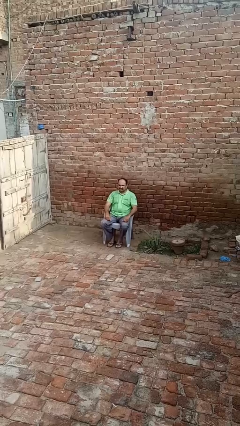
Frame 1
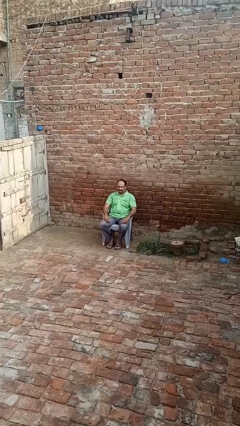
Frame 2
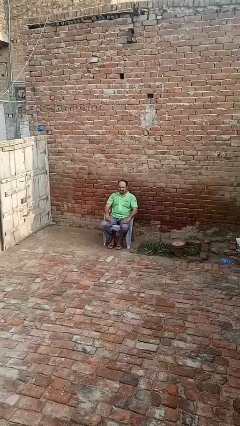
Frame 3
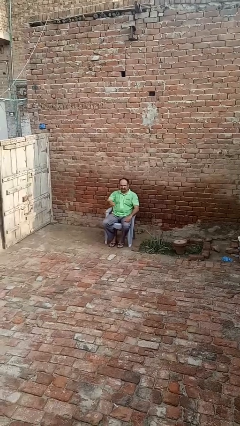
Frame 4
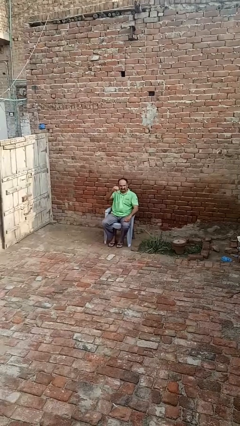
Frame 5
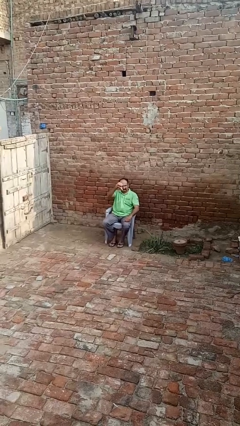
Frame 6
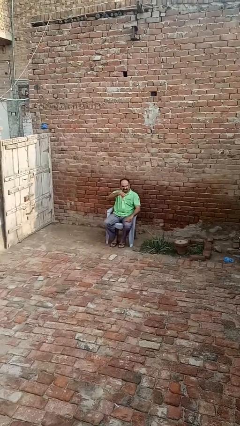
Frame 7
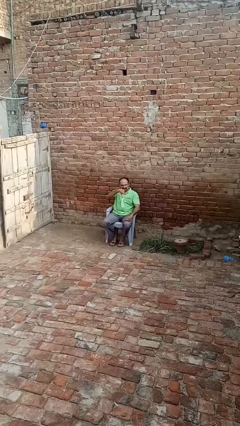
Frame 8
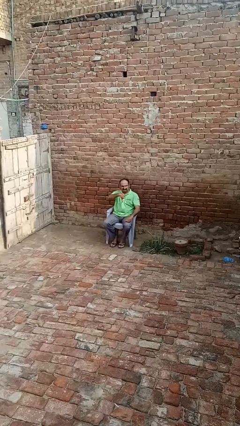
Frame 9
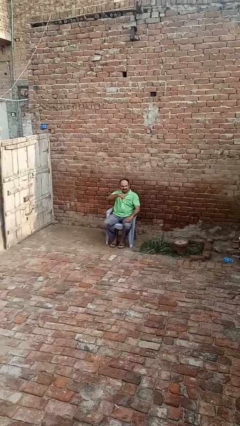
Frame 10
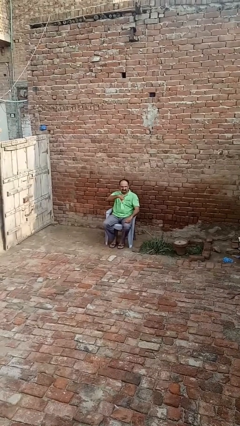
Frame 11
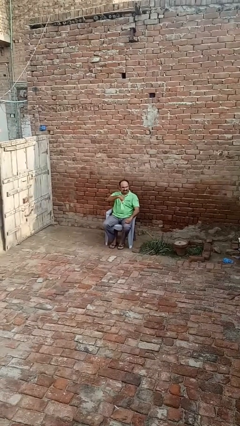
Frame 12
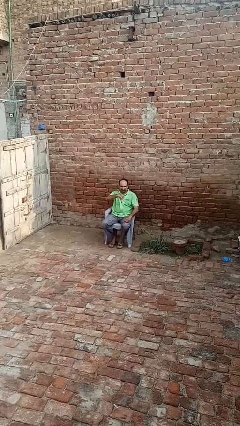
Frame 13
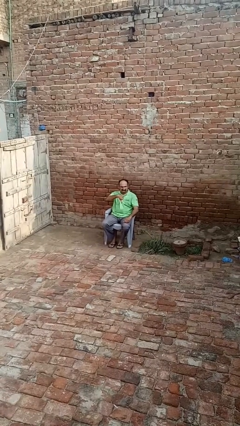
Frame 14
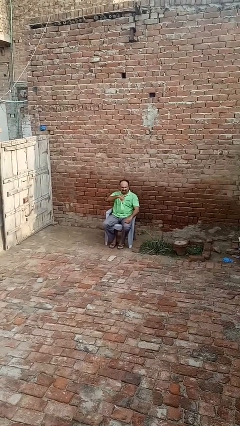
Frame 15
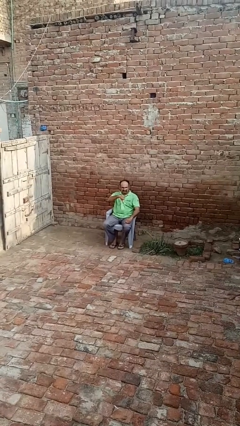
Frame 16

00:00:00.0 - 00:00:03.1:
person gestures thumbs down

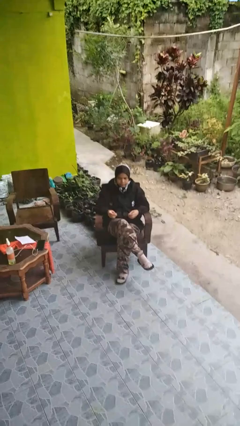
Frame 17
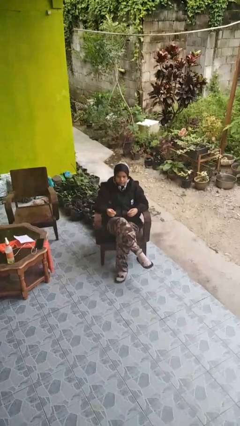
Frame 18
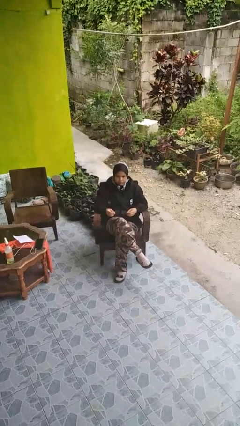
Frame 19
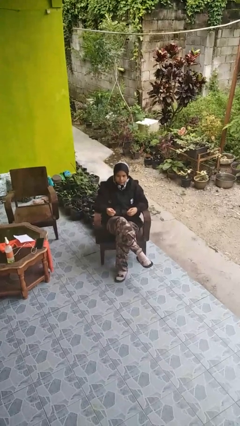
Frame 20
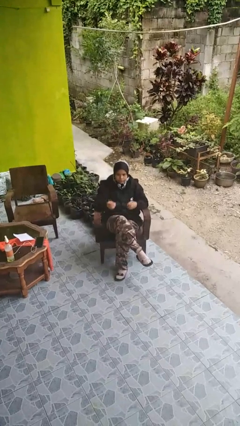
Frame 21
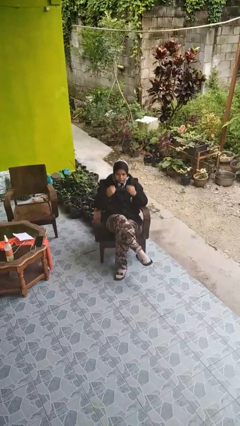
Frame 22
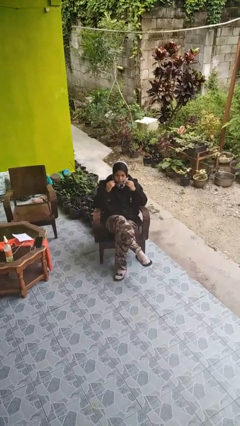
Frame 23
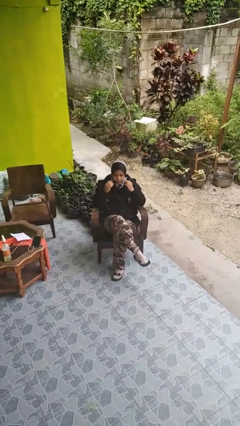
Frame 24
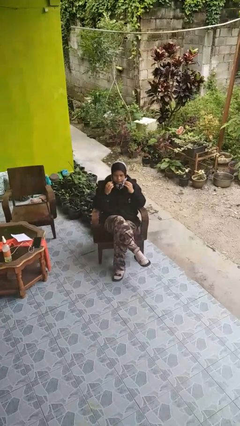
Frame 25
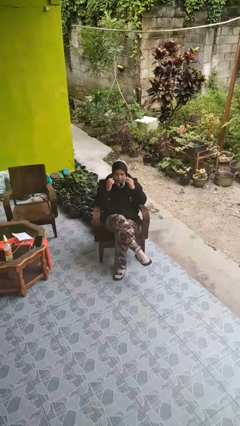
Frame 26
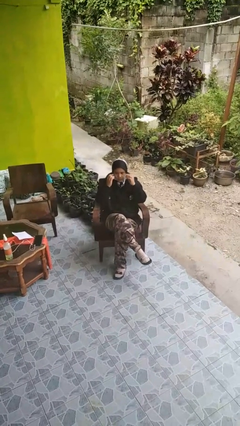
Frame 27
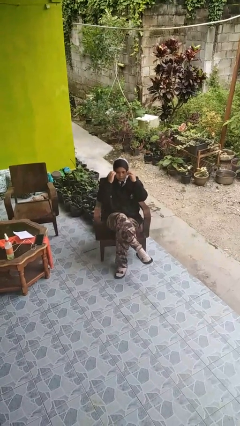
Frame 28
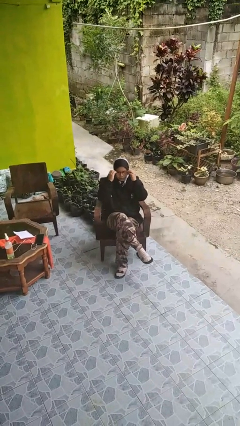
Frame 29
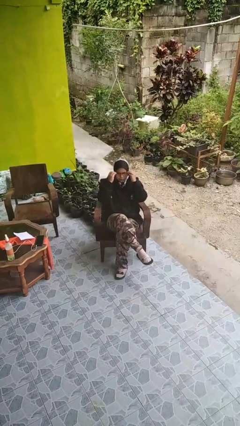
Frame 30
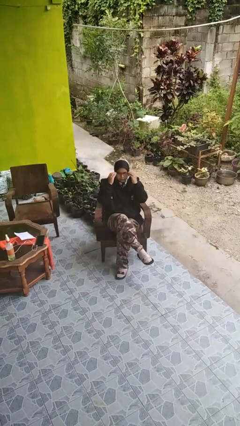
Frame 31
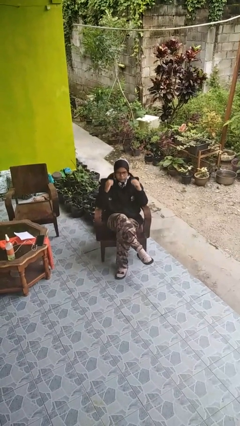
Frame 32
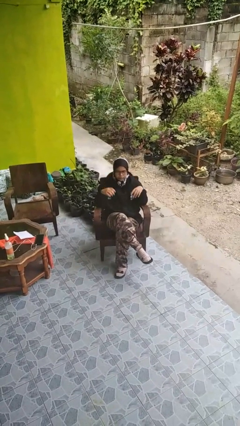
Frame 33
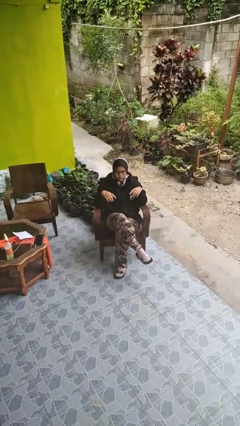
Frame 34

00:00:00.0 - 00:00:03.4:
person puts on glasses

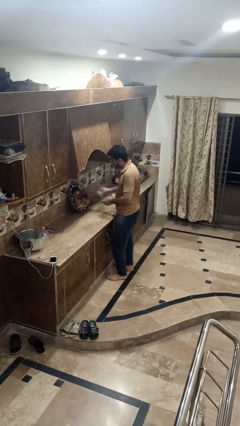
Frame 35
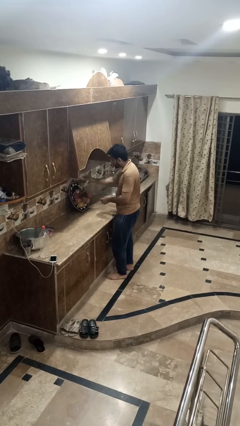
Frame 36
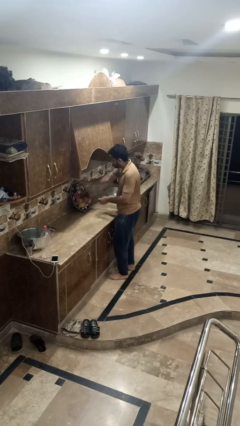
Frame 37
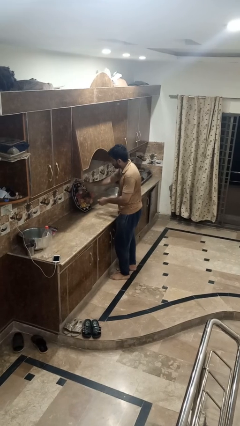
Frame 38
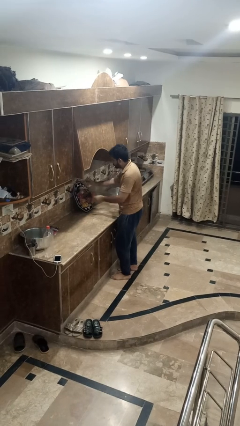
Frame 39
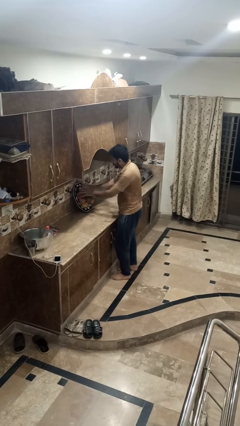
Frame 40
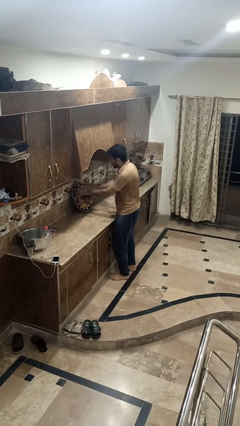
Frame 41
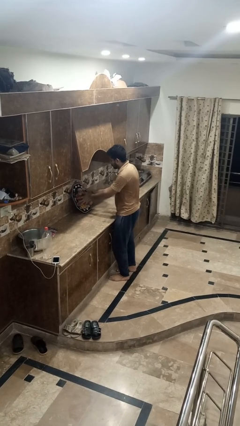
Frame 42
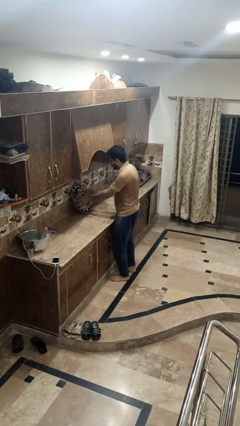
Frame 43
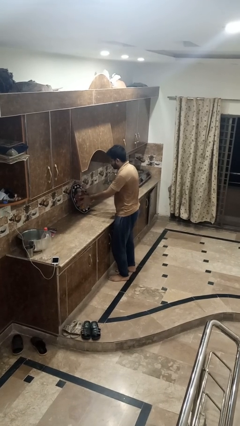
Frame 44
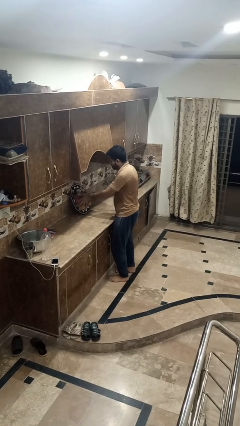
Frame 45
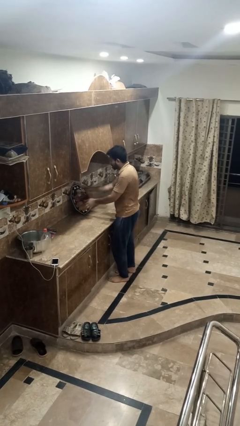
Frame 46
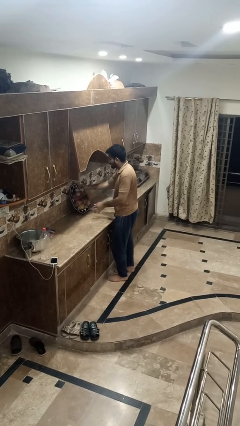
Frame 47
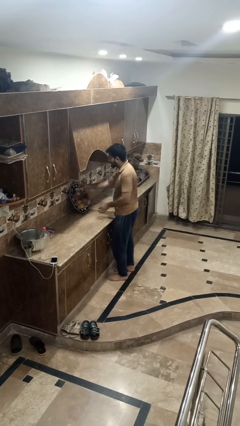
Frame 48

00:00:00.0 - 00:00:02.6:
person arranges flowers in vase

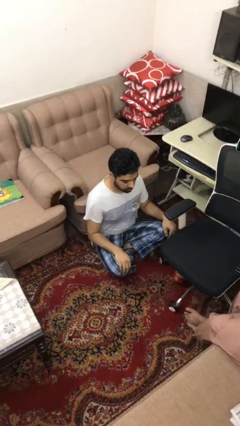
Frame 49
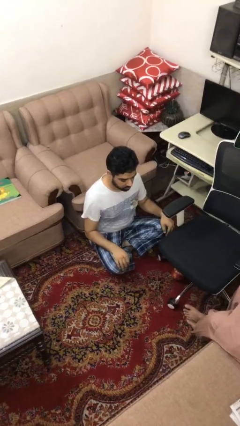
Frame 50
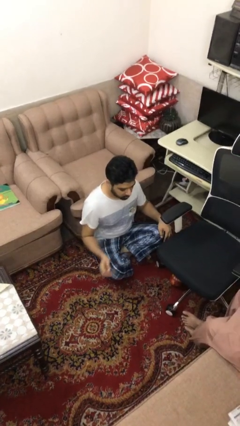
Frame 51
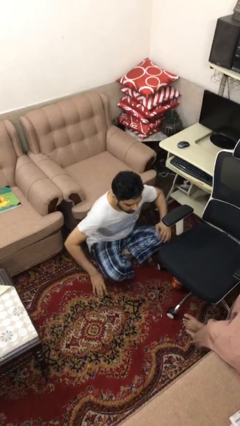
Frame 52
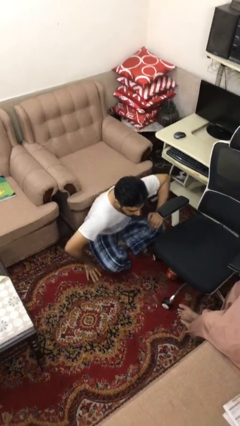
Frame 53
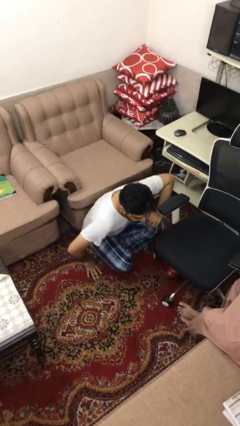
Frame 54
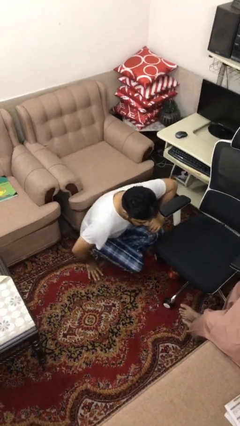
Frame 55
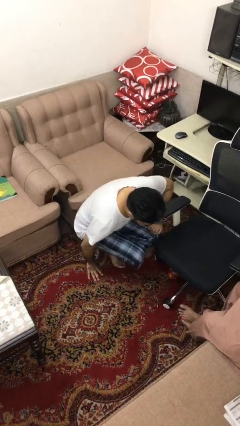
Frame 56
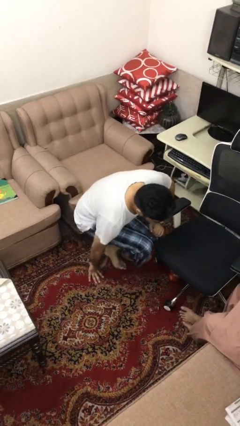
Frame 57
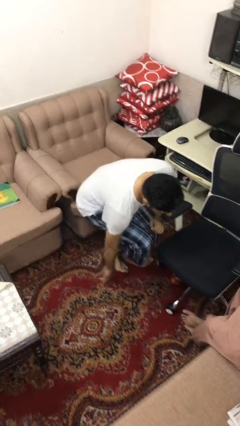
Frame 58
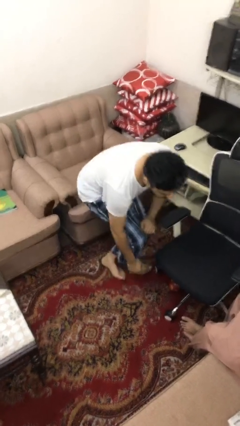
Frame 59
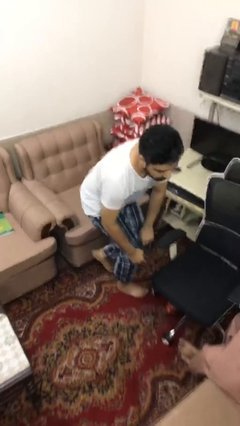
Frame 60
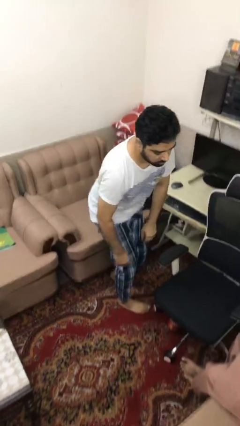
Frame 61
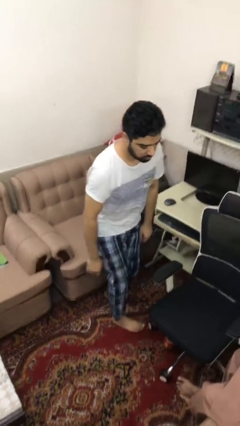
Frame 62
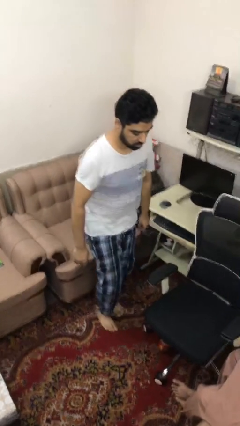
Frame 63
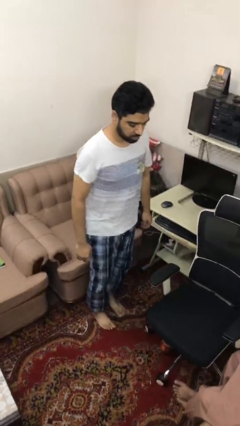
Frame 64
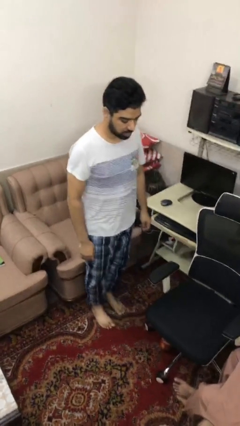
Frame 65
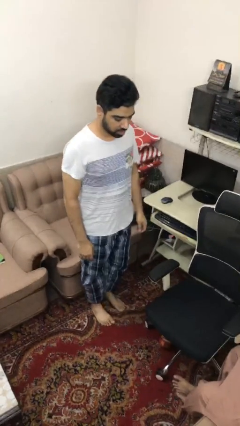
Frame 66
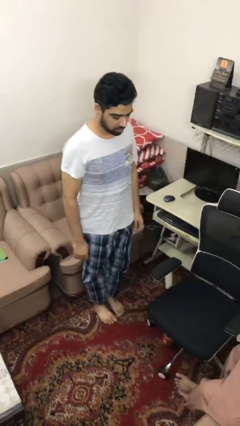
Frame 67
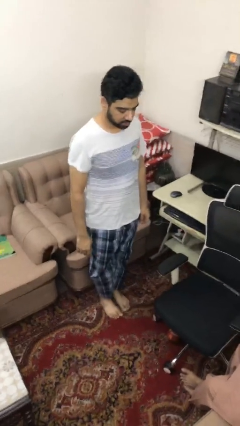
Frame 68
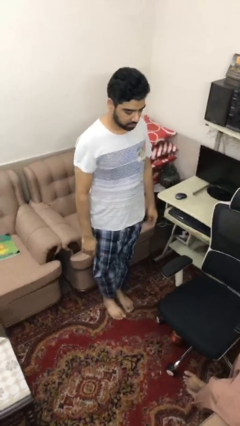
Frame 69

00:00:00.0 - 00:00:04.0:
person stands up from floor

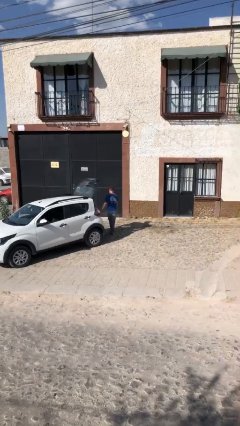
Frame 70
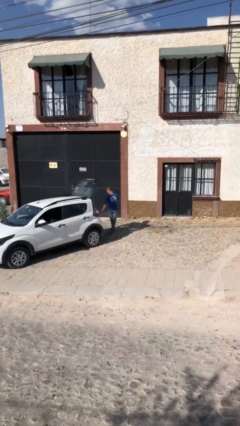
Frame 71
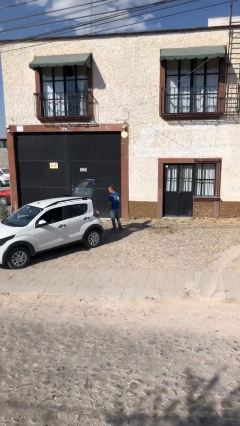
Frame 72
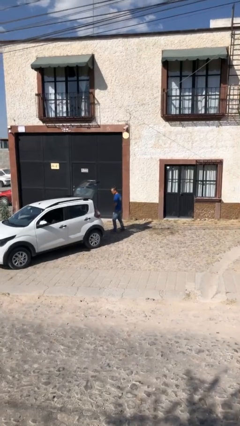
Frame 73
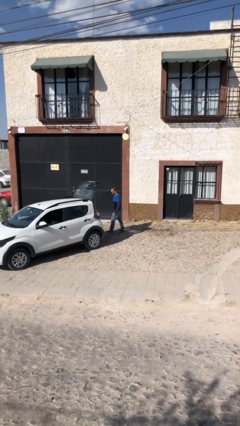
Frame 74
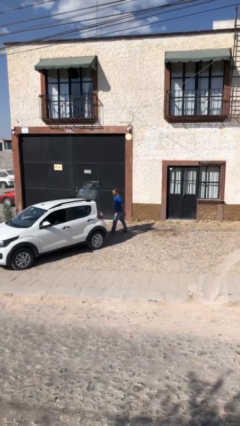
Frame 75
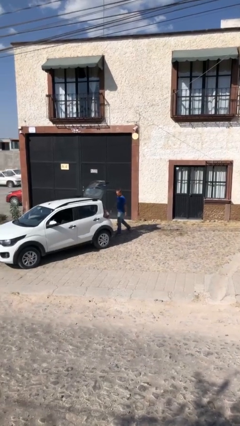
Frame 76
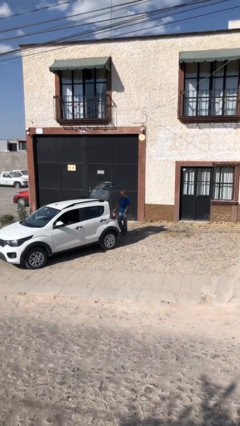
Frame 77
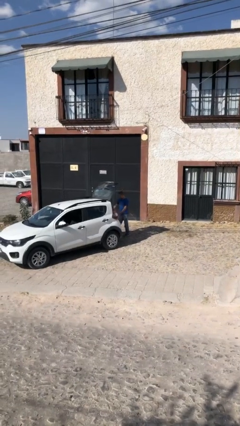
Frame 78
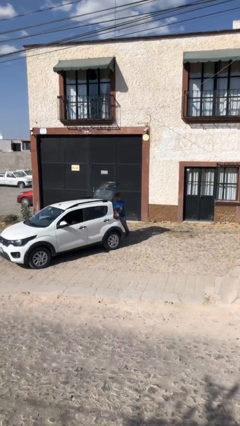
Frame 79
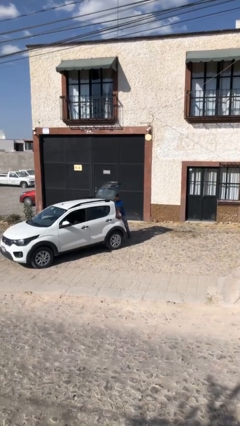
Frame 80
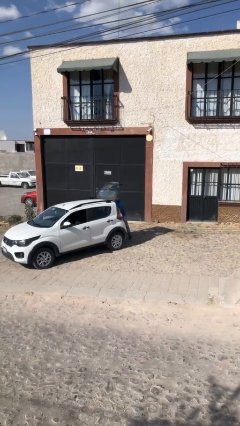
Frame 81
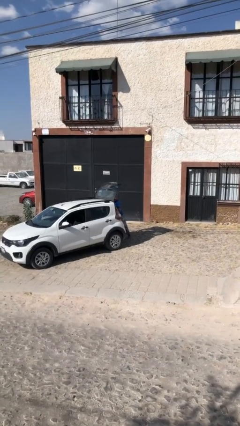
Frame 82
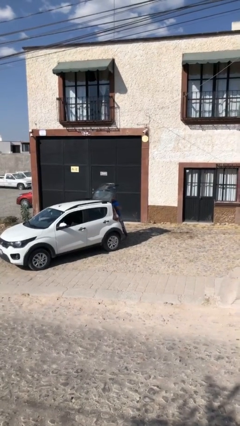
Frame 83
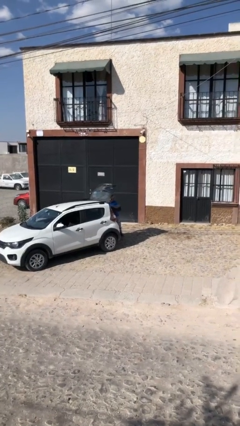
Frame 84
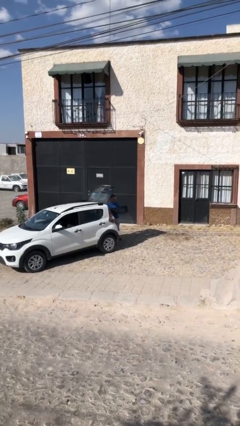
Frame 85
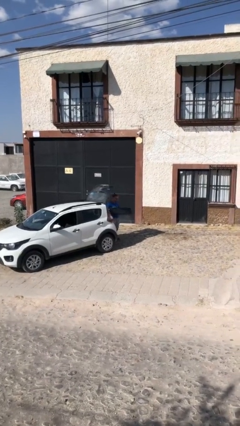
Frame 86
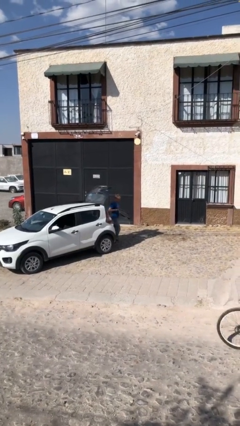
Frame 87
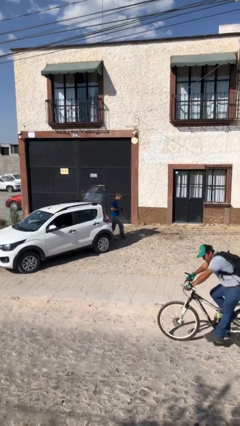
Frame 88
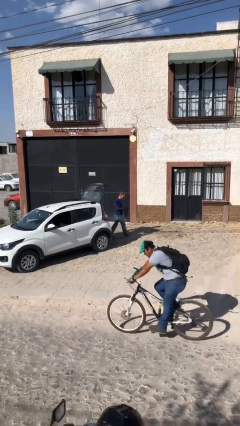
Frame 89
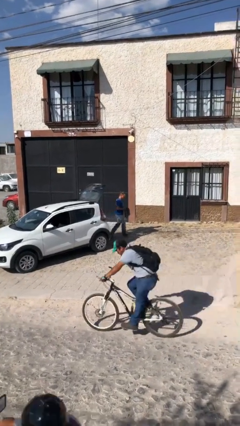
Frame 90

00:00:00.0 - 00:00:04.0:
person unloads car

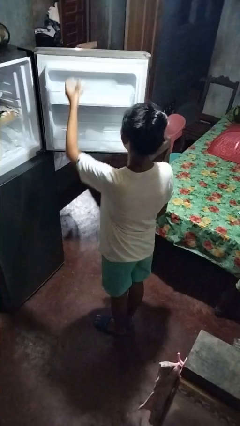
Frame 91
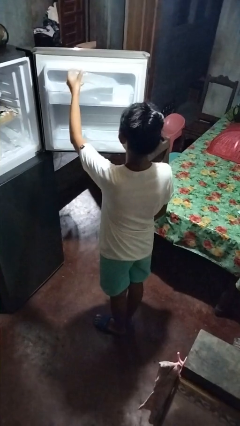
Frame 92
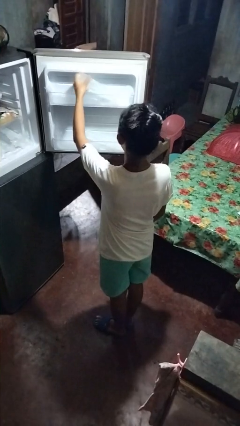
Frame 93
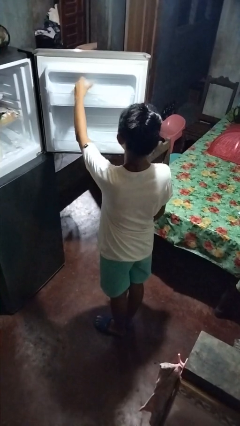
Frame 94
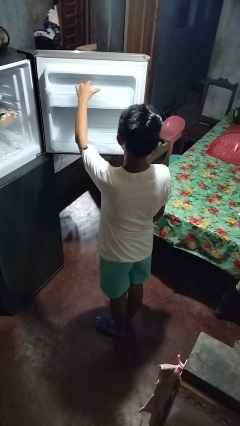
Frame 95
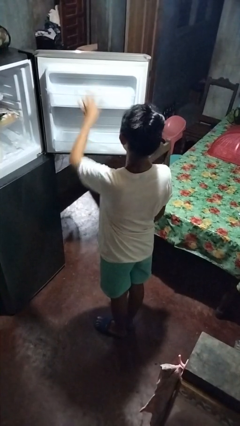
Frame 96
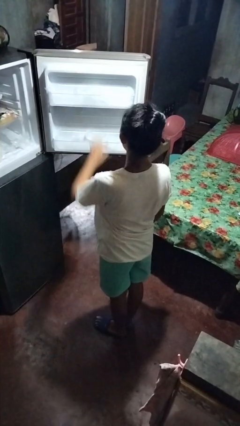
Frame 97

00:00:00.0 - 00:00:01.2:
person puts object into refrigerator
